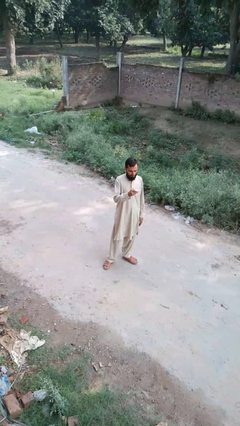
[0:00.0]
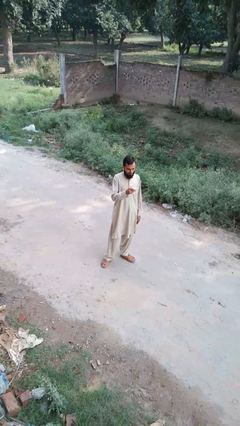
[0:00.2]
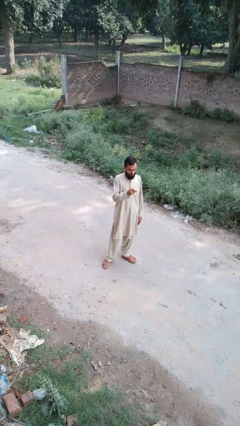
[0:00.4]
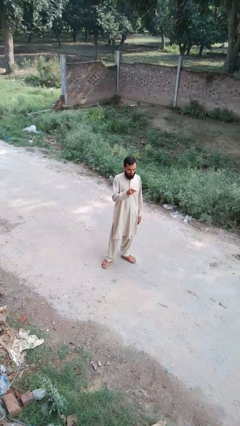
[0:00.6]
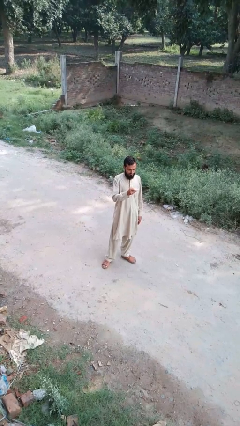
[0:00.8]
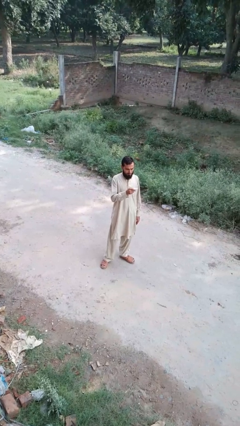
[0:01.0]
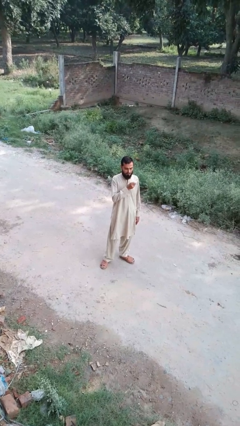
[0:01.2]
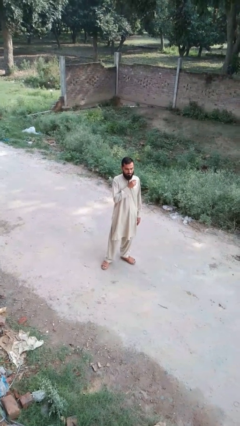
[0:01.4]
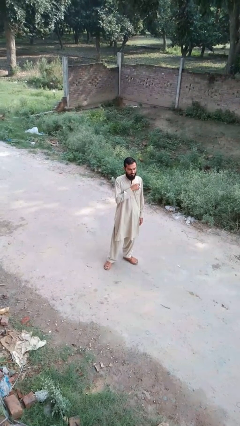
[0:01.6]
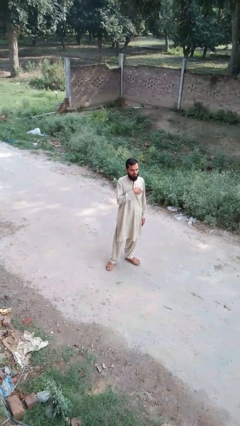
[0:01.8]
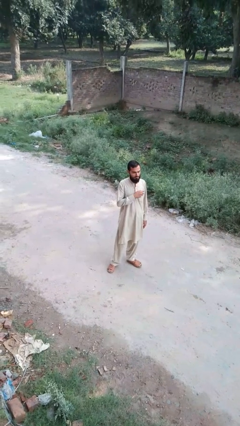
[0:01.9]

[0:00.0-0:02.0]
person puts phone into pocket

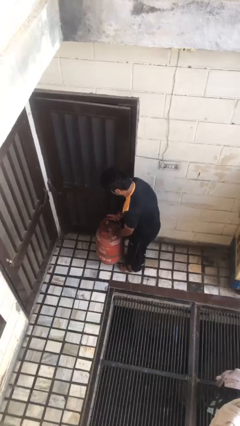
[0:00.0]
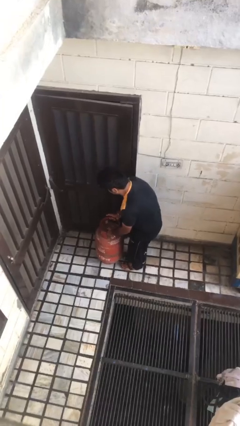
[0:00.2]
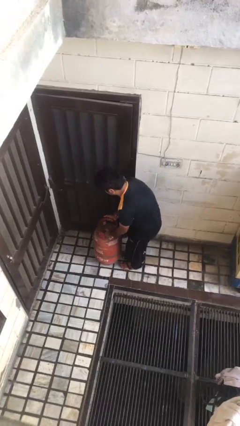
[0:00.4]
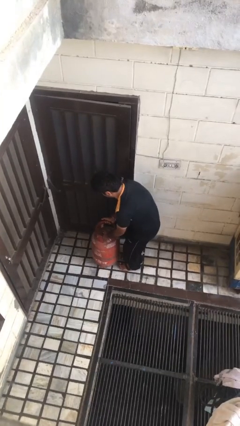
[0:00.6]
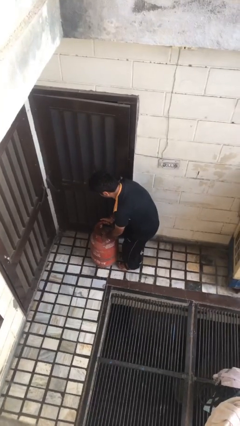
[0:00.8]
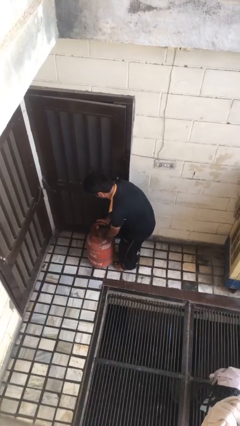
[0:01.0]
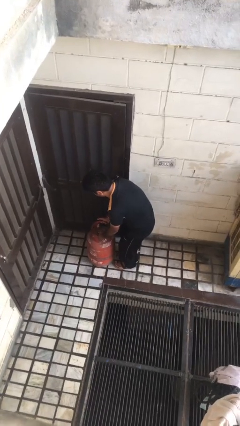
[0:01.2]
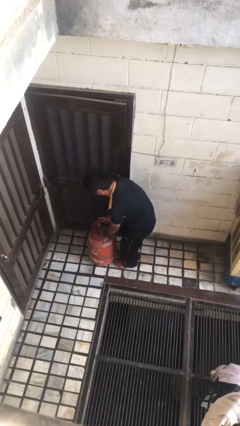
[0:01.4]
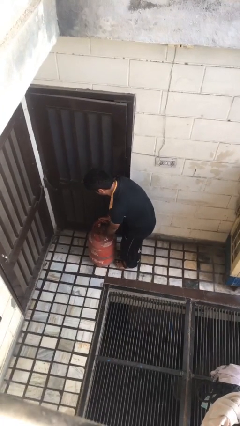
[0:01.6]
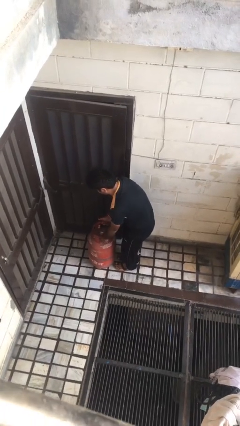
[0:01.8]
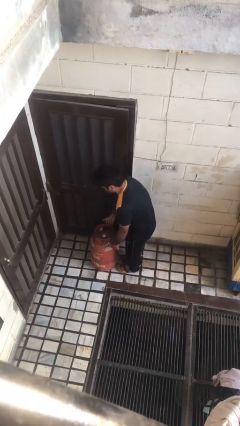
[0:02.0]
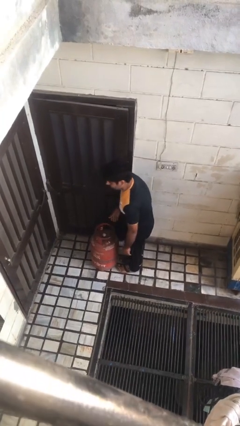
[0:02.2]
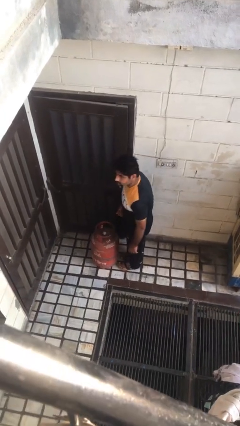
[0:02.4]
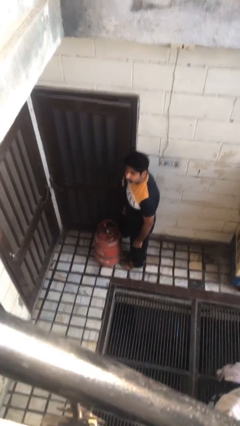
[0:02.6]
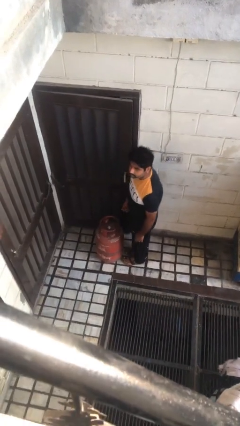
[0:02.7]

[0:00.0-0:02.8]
person puts down object on floor

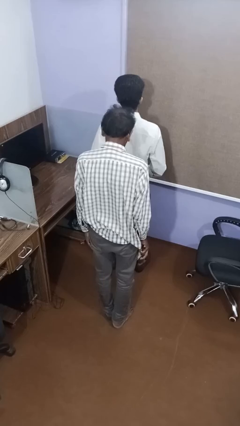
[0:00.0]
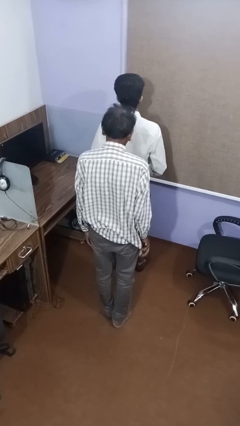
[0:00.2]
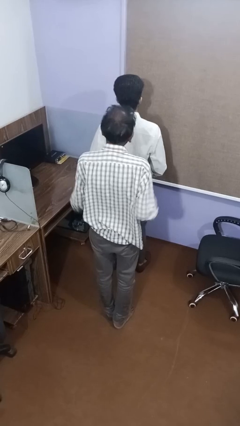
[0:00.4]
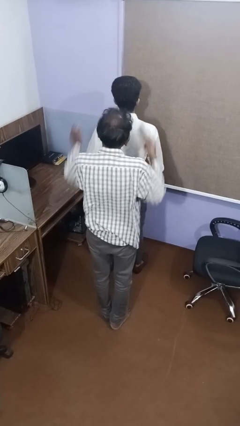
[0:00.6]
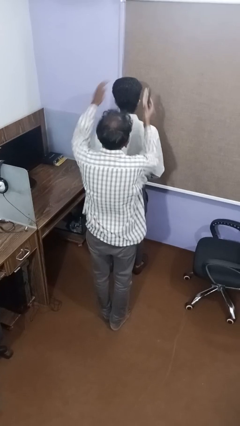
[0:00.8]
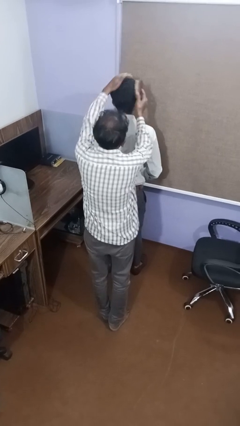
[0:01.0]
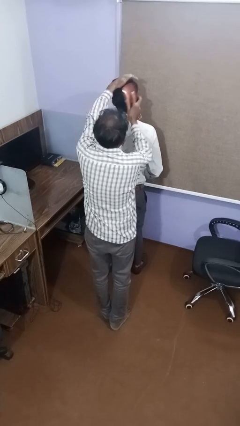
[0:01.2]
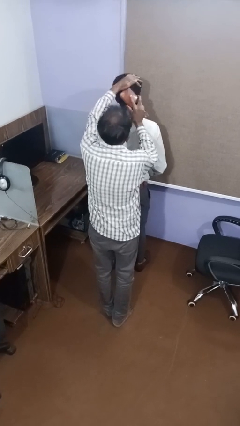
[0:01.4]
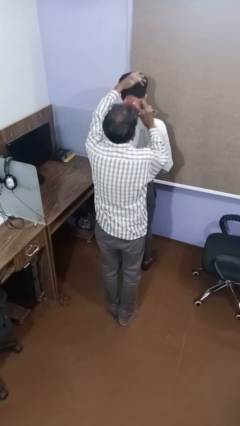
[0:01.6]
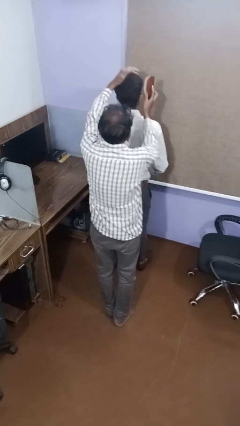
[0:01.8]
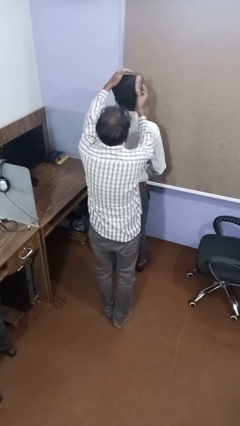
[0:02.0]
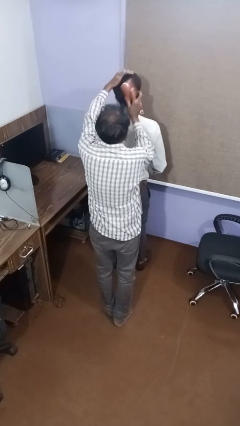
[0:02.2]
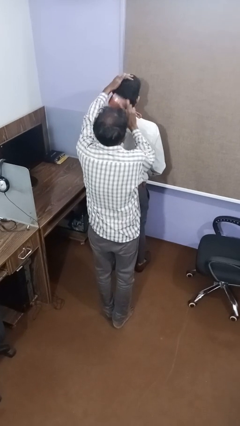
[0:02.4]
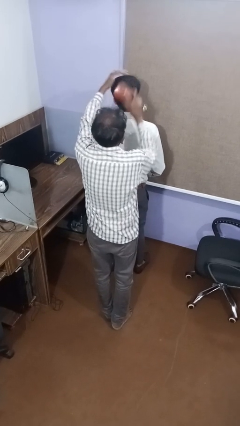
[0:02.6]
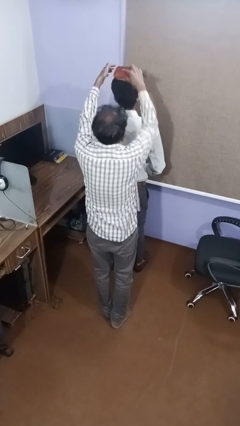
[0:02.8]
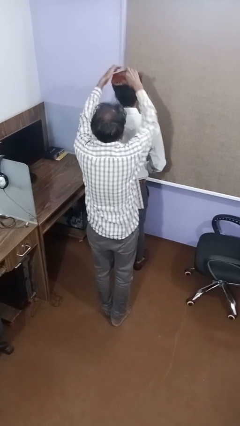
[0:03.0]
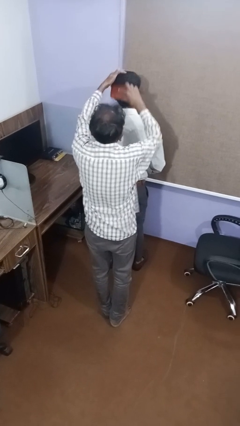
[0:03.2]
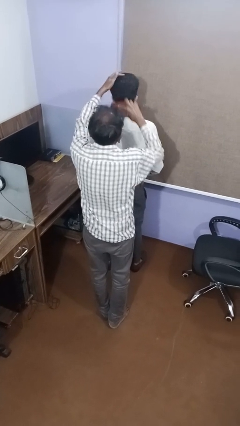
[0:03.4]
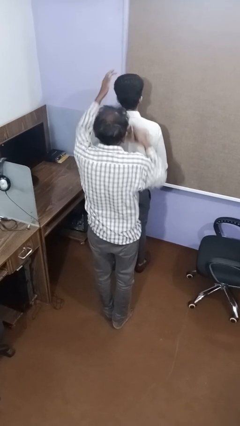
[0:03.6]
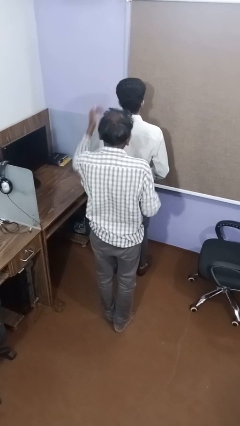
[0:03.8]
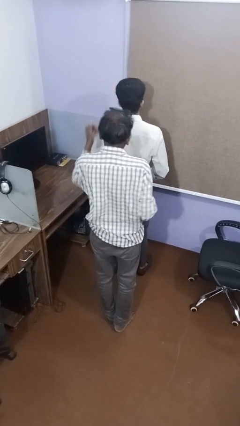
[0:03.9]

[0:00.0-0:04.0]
person brushes hair of person

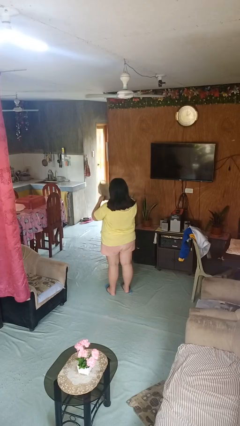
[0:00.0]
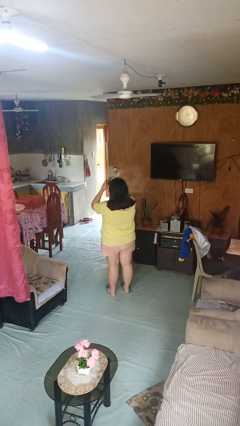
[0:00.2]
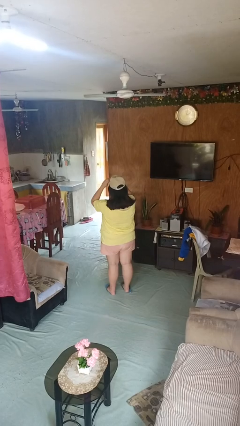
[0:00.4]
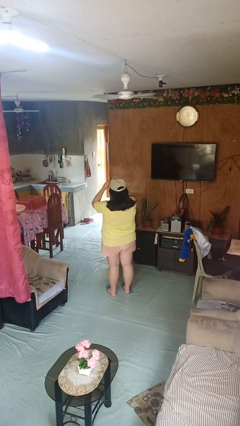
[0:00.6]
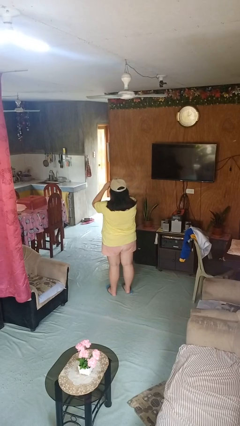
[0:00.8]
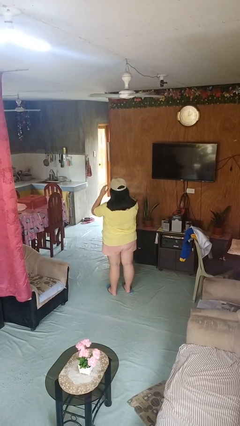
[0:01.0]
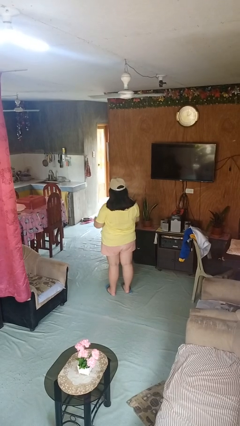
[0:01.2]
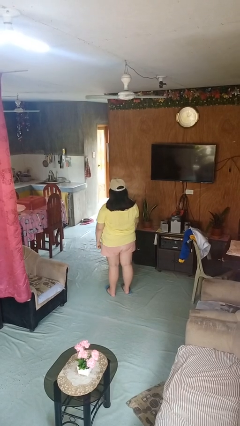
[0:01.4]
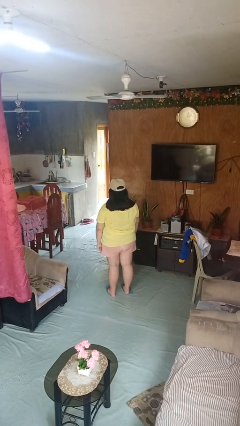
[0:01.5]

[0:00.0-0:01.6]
person puts on hat

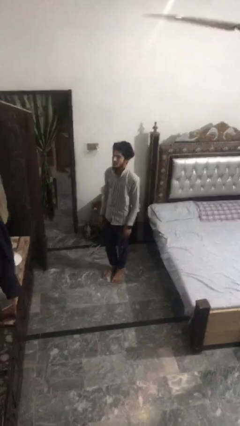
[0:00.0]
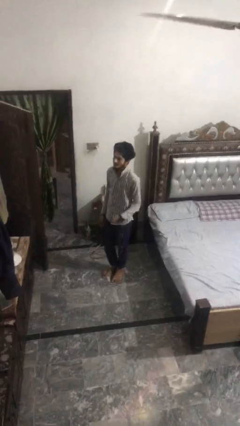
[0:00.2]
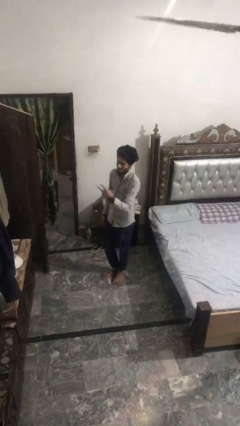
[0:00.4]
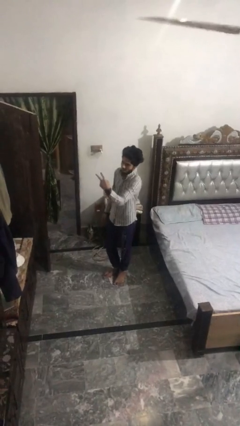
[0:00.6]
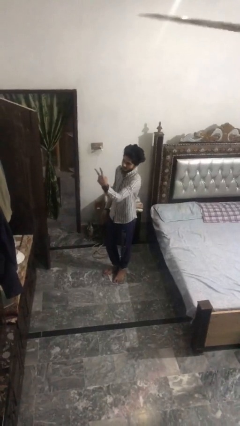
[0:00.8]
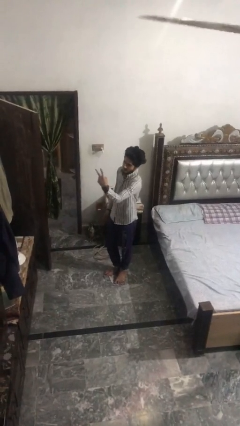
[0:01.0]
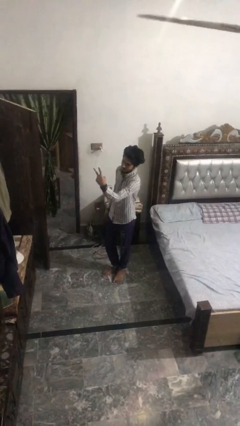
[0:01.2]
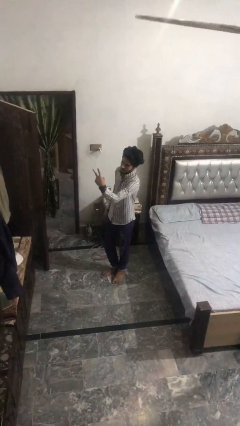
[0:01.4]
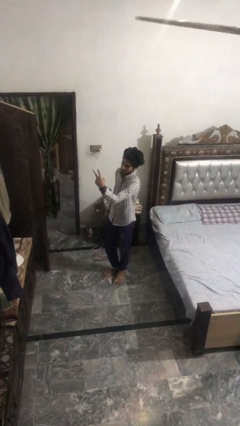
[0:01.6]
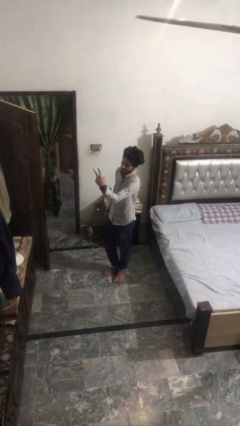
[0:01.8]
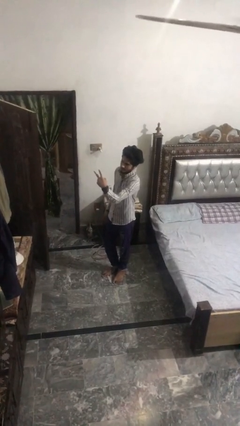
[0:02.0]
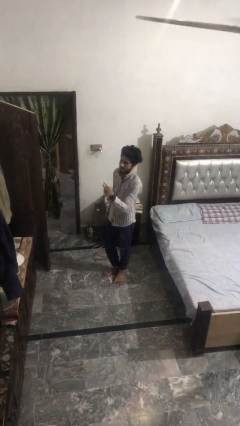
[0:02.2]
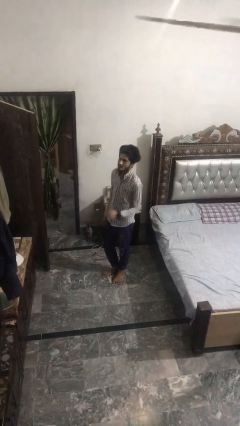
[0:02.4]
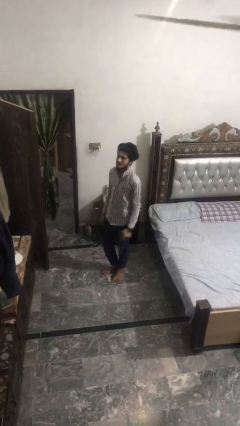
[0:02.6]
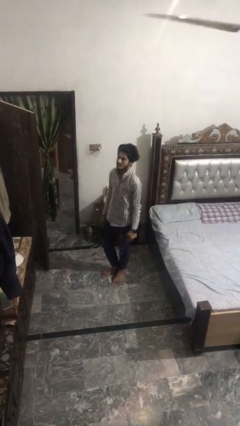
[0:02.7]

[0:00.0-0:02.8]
person gestures peace

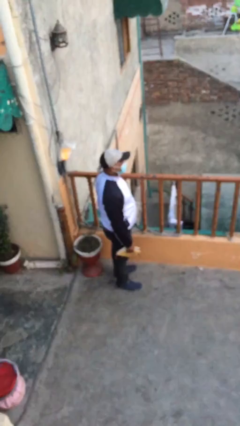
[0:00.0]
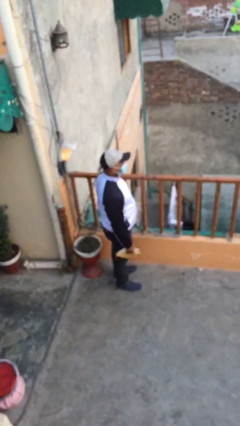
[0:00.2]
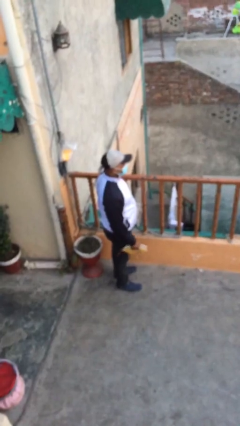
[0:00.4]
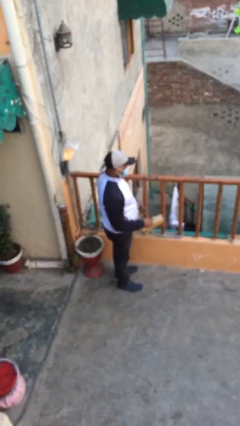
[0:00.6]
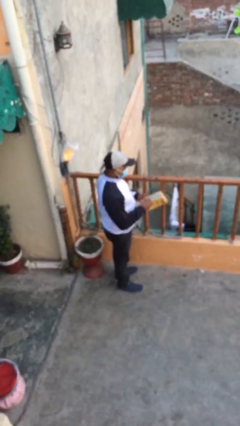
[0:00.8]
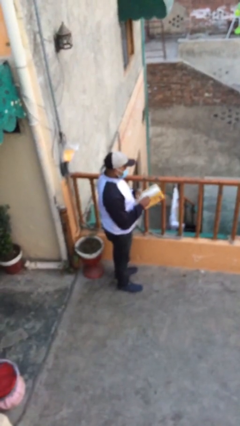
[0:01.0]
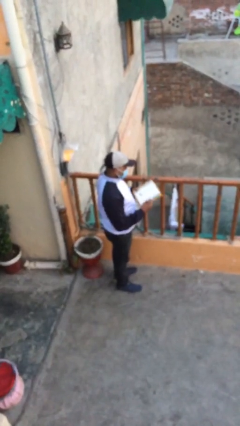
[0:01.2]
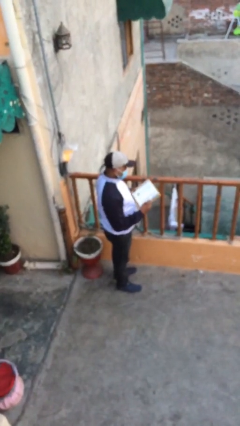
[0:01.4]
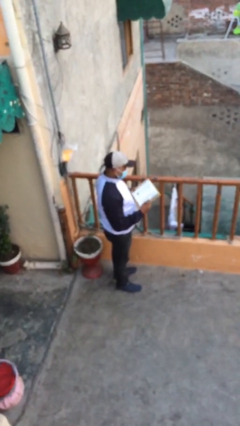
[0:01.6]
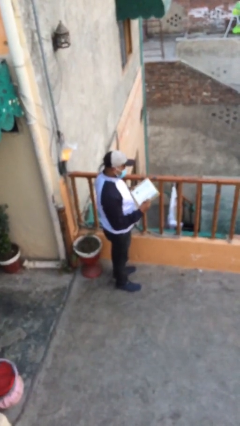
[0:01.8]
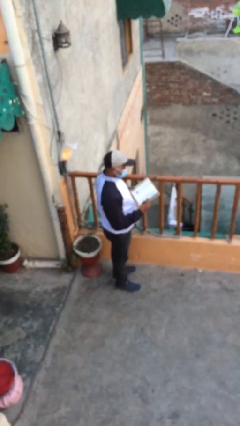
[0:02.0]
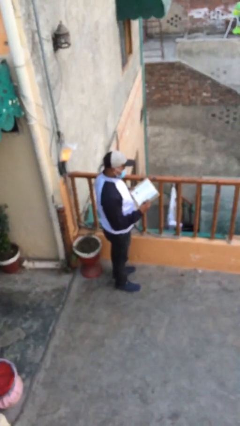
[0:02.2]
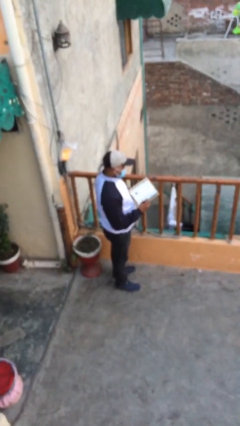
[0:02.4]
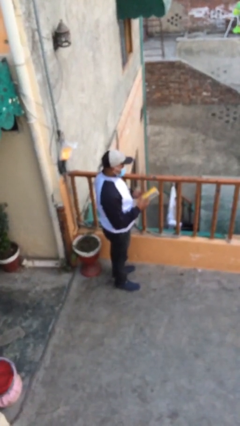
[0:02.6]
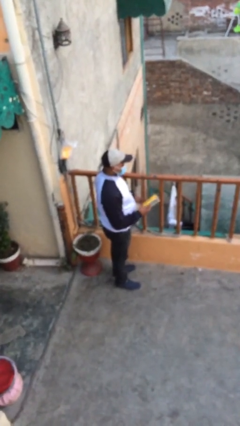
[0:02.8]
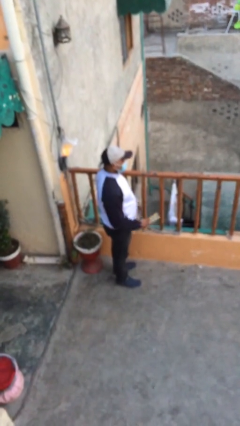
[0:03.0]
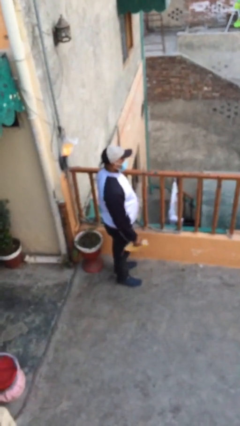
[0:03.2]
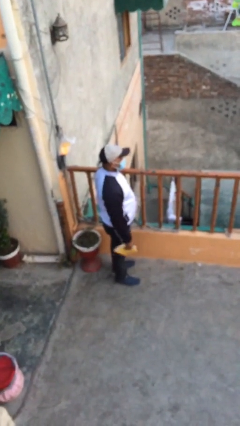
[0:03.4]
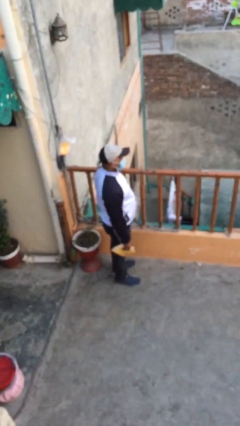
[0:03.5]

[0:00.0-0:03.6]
person reads document

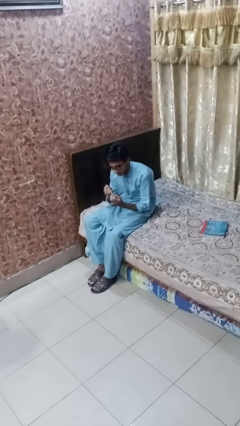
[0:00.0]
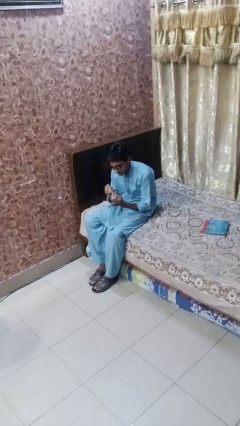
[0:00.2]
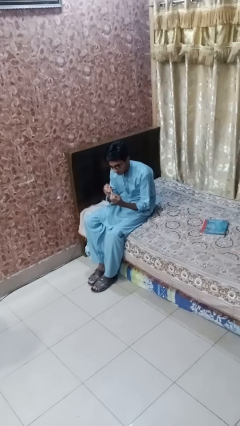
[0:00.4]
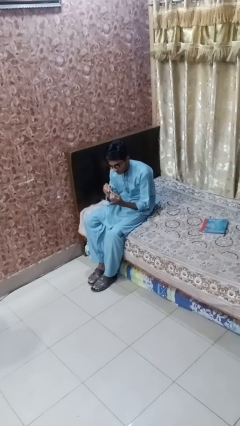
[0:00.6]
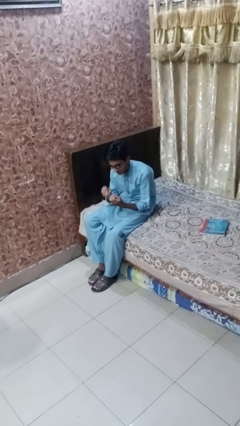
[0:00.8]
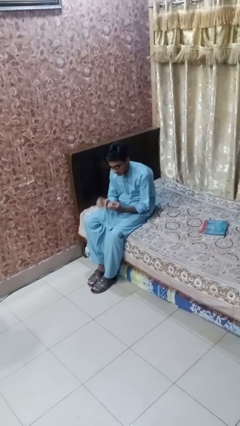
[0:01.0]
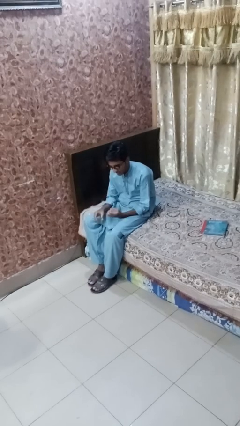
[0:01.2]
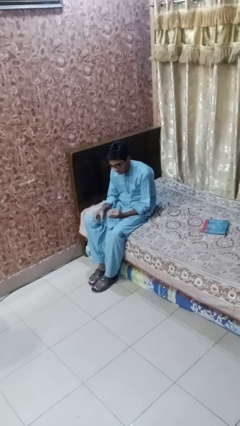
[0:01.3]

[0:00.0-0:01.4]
person clips fingernails
